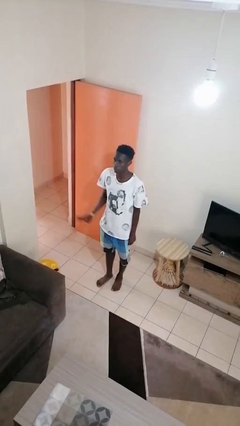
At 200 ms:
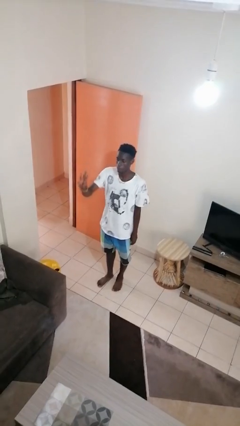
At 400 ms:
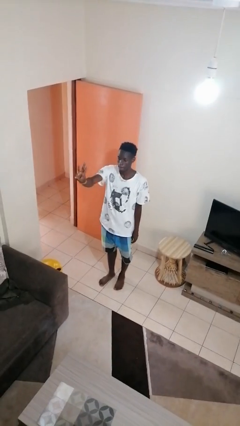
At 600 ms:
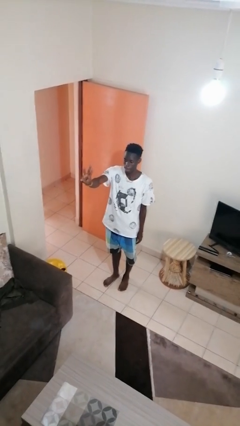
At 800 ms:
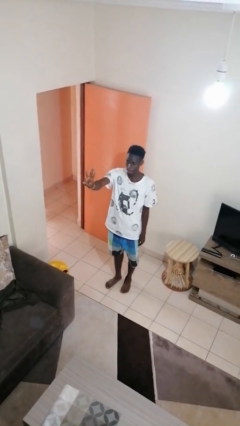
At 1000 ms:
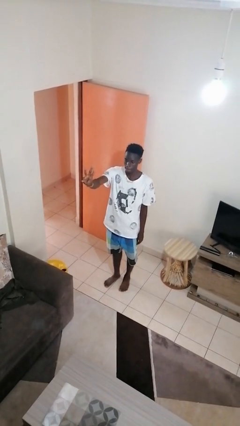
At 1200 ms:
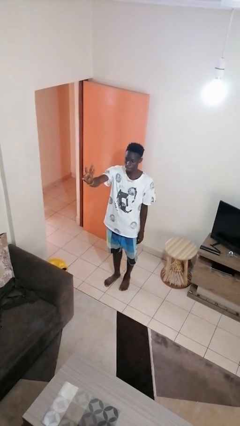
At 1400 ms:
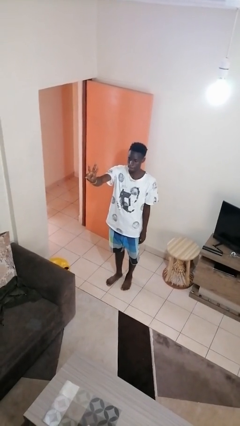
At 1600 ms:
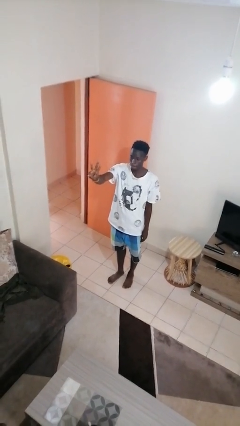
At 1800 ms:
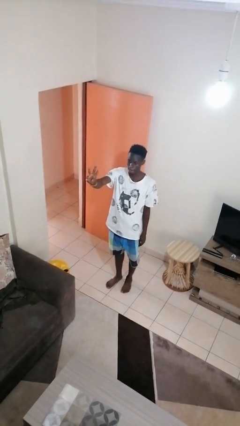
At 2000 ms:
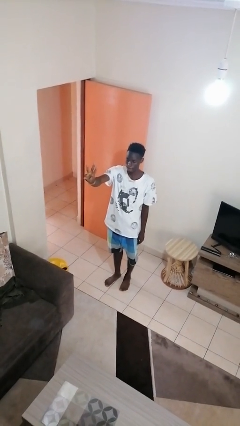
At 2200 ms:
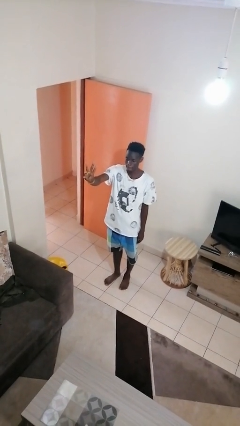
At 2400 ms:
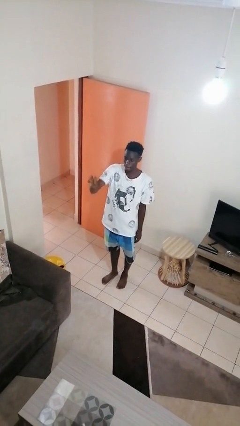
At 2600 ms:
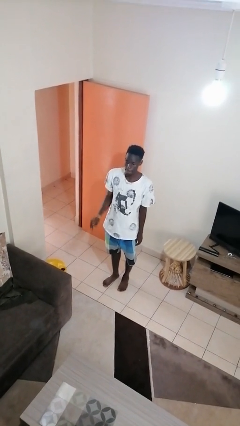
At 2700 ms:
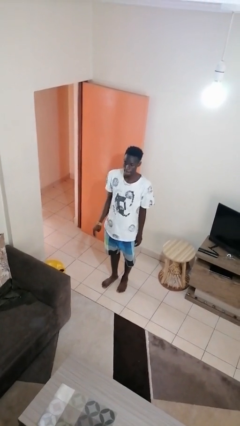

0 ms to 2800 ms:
person gestures number three

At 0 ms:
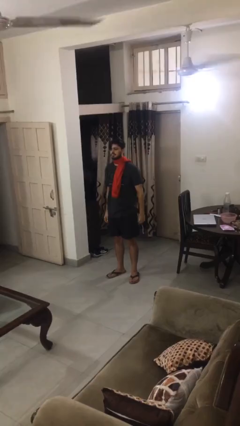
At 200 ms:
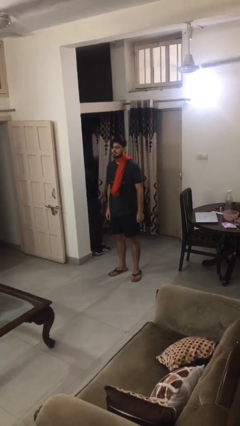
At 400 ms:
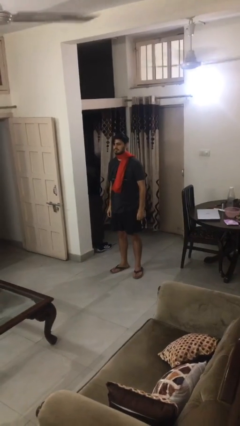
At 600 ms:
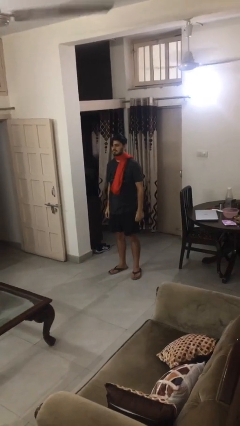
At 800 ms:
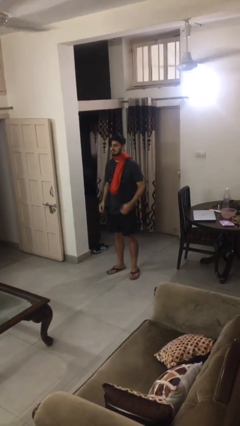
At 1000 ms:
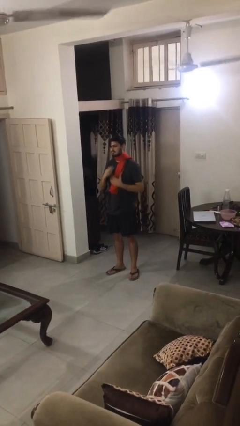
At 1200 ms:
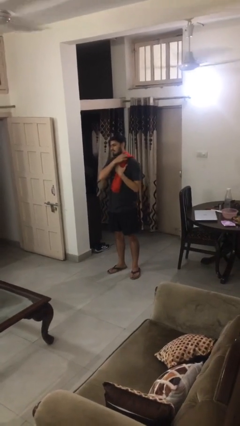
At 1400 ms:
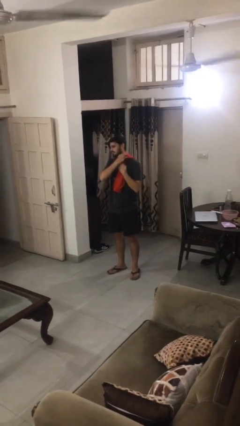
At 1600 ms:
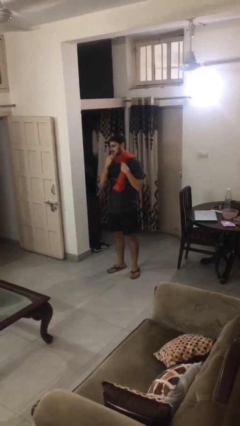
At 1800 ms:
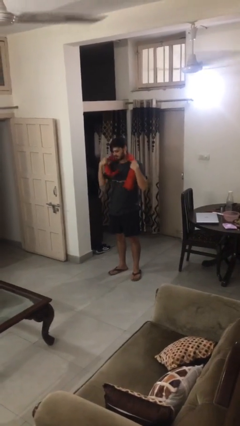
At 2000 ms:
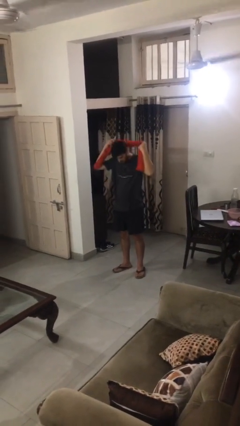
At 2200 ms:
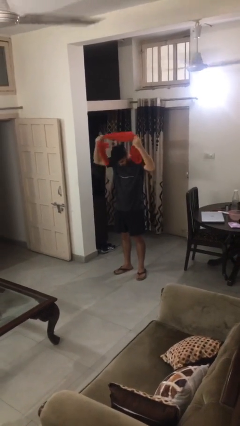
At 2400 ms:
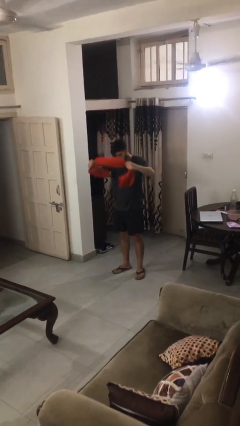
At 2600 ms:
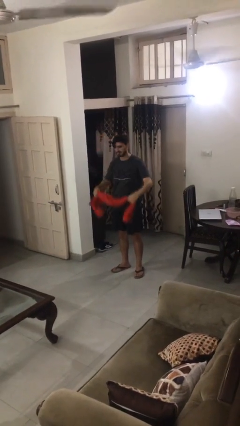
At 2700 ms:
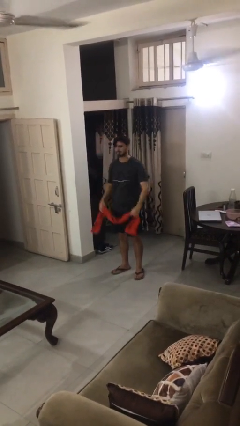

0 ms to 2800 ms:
person takes off scarf

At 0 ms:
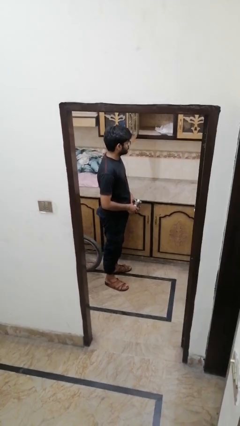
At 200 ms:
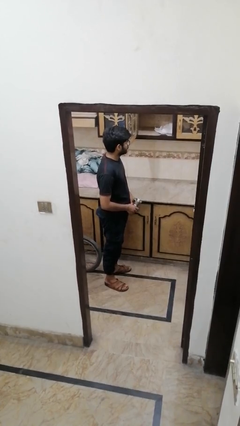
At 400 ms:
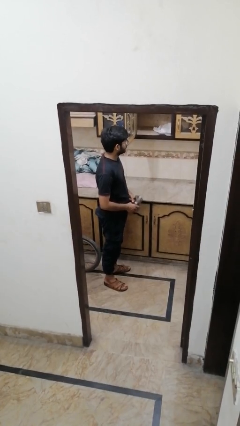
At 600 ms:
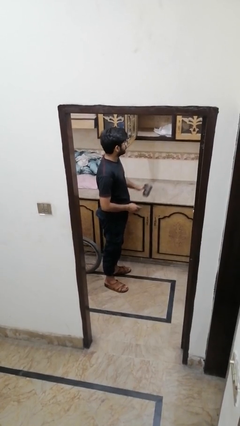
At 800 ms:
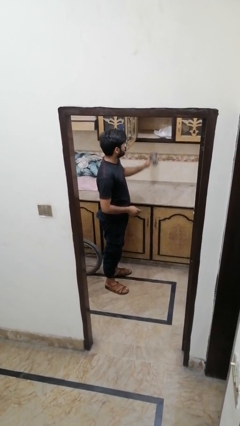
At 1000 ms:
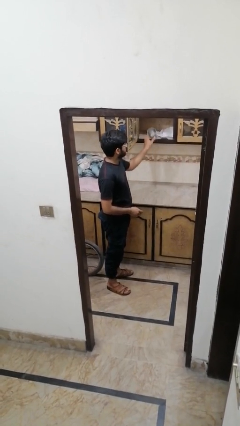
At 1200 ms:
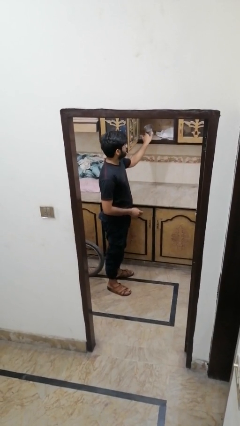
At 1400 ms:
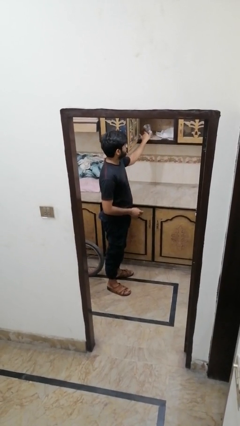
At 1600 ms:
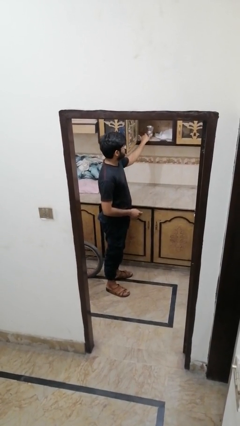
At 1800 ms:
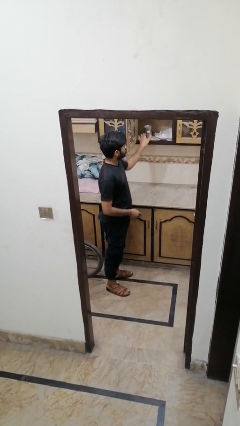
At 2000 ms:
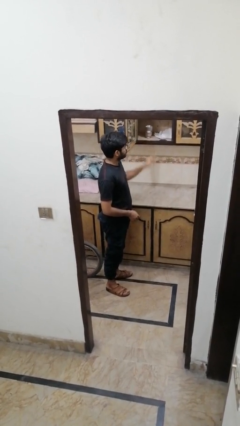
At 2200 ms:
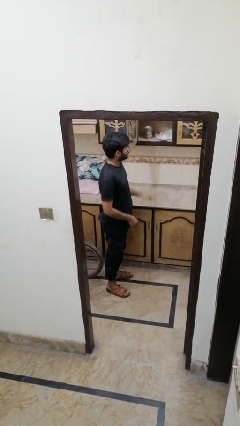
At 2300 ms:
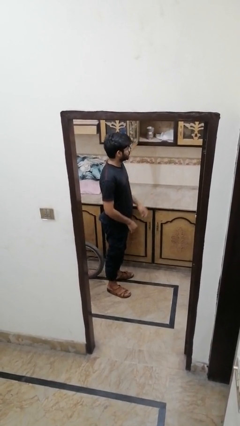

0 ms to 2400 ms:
person puts down object into cabinet

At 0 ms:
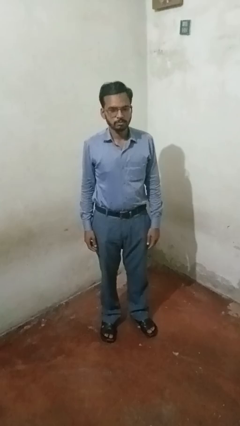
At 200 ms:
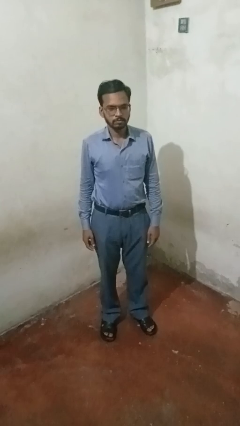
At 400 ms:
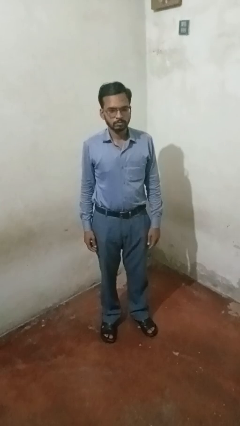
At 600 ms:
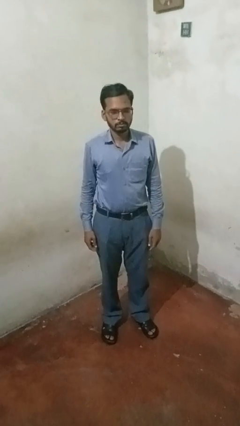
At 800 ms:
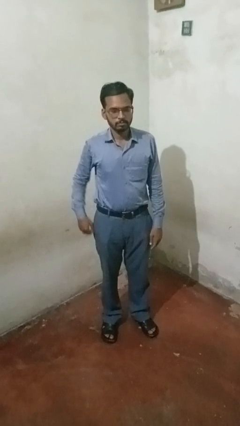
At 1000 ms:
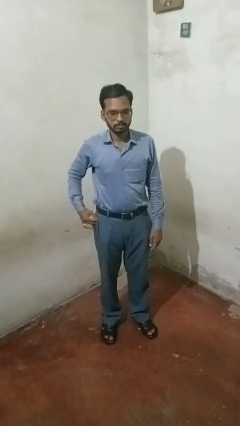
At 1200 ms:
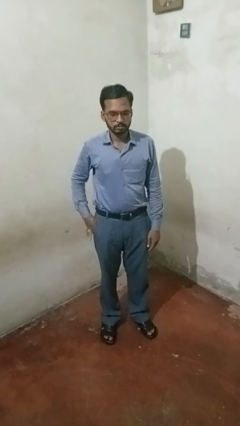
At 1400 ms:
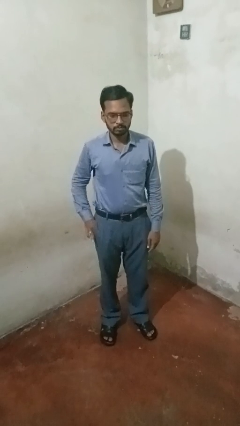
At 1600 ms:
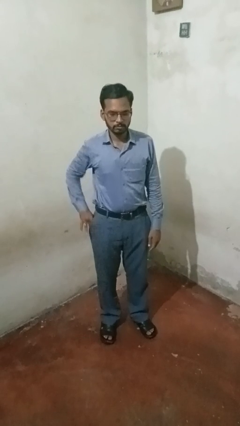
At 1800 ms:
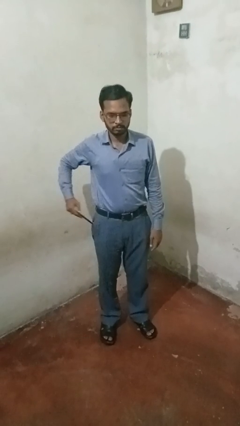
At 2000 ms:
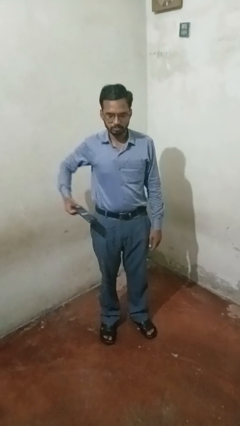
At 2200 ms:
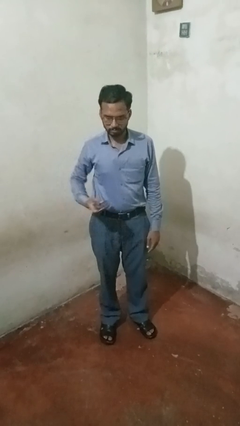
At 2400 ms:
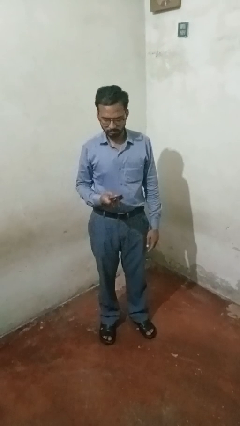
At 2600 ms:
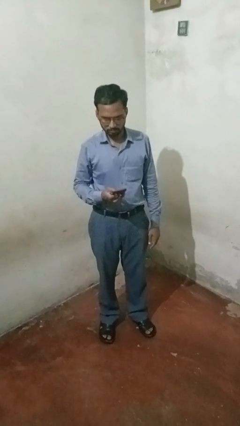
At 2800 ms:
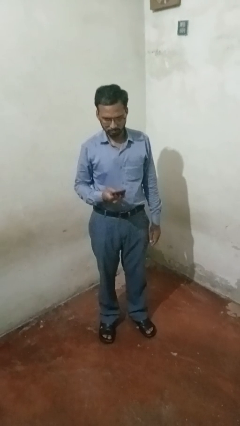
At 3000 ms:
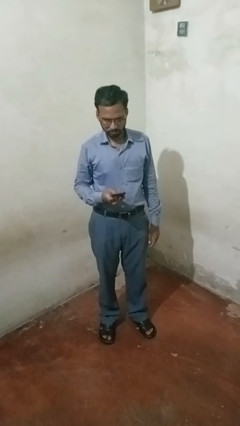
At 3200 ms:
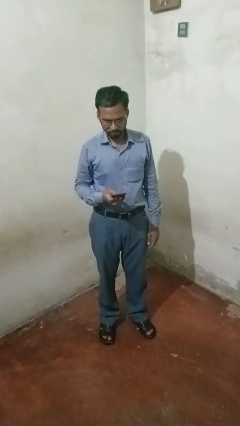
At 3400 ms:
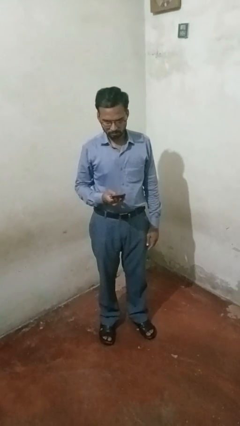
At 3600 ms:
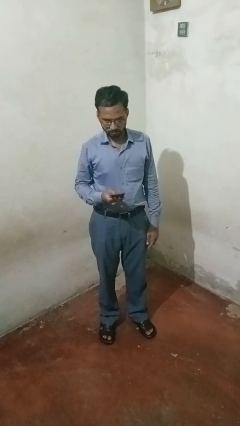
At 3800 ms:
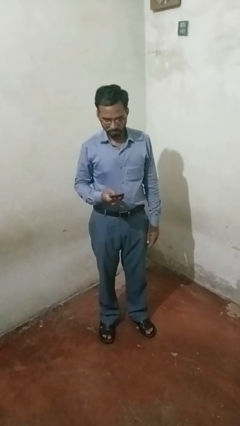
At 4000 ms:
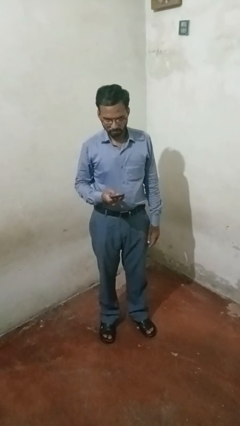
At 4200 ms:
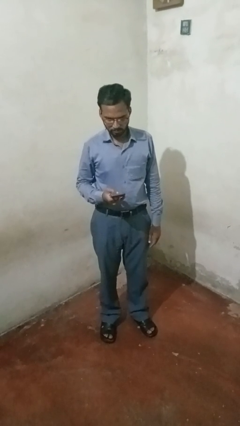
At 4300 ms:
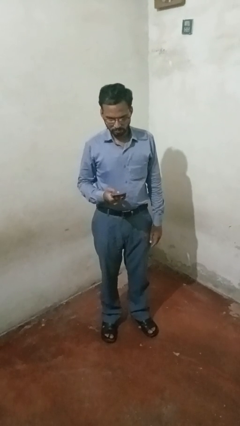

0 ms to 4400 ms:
person takes phone from pocket

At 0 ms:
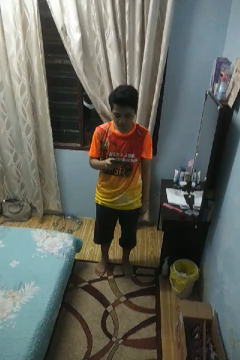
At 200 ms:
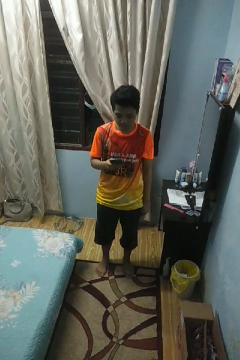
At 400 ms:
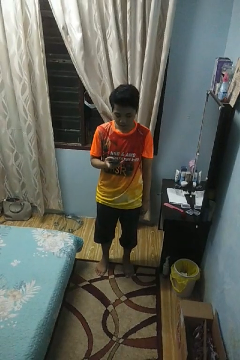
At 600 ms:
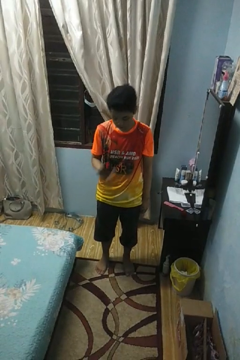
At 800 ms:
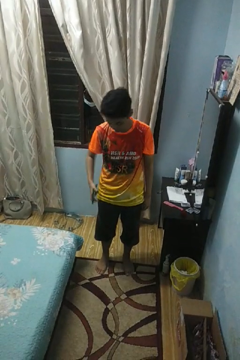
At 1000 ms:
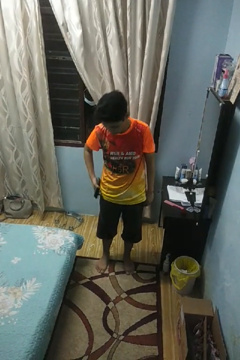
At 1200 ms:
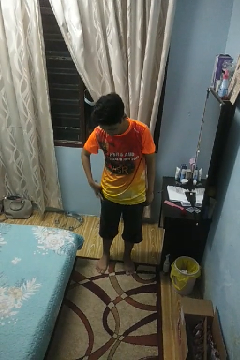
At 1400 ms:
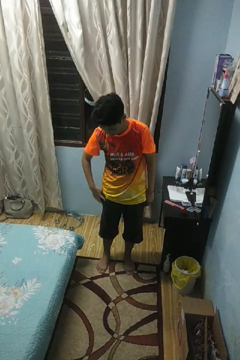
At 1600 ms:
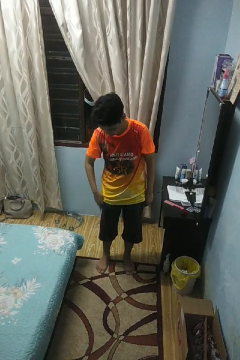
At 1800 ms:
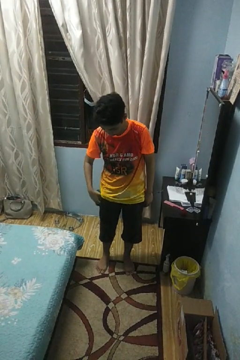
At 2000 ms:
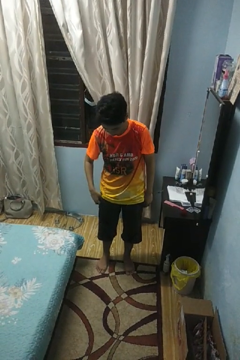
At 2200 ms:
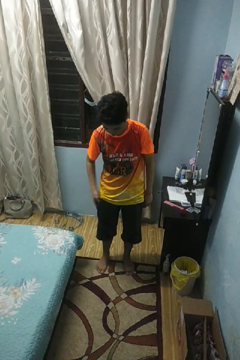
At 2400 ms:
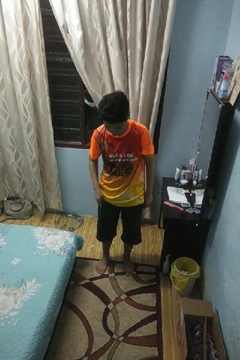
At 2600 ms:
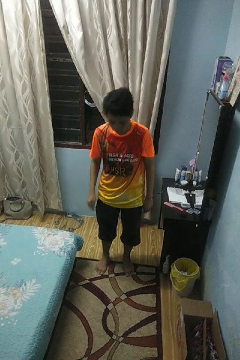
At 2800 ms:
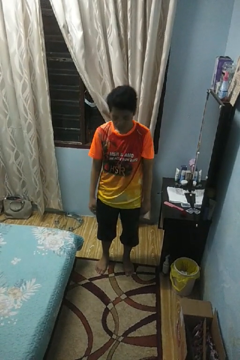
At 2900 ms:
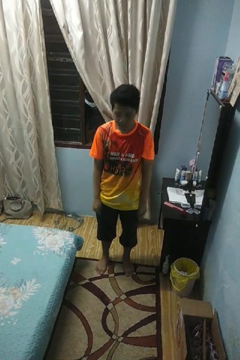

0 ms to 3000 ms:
person puts phone into pocket

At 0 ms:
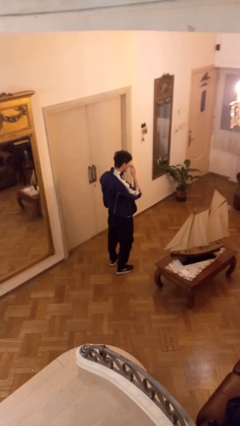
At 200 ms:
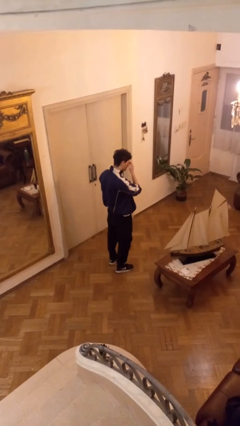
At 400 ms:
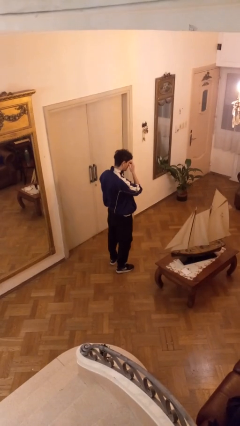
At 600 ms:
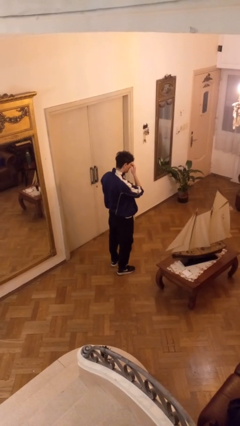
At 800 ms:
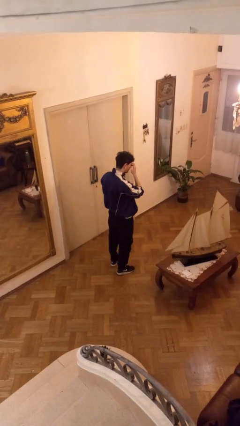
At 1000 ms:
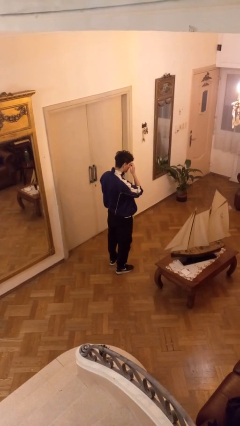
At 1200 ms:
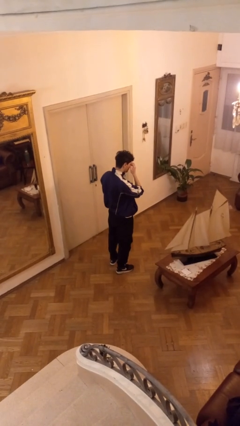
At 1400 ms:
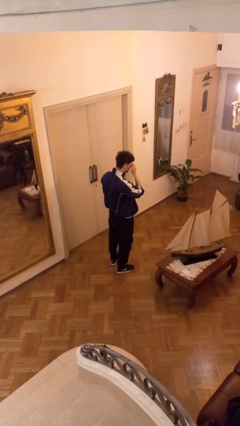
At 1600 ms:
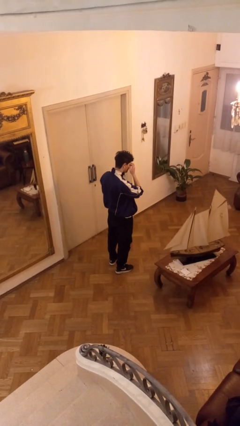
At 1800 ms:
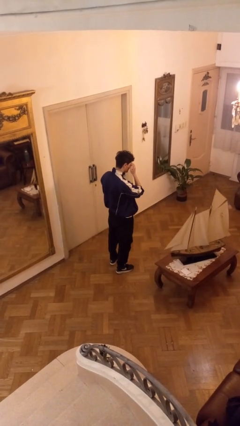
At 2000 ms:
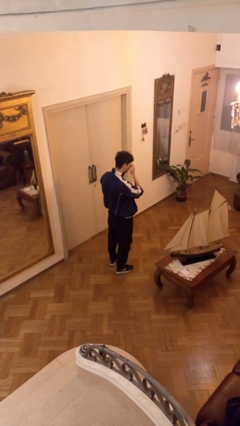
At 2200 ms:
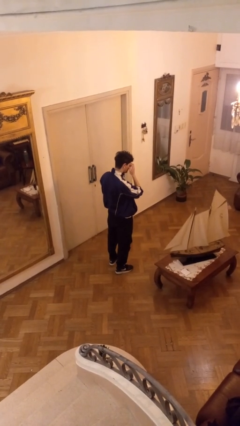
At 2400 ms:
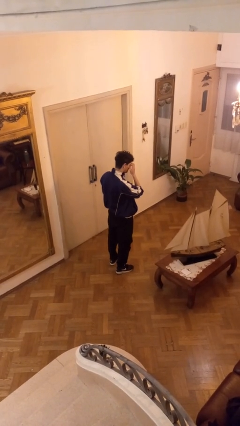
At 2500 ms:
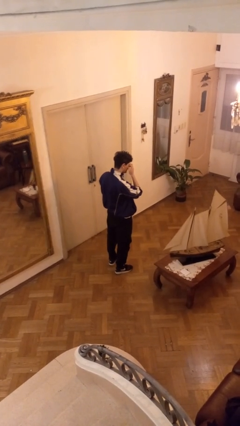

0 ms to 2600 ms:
person scratches face
